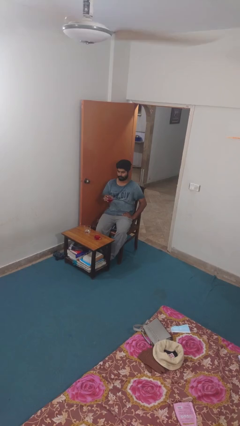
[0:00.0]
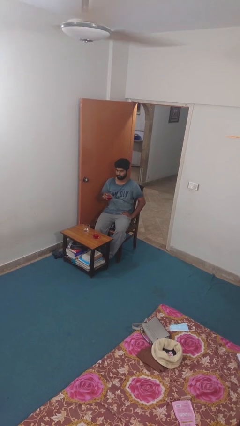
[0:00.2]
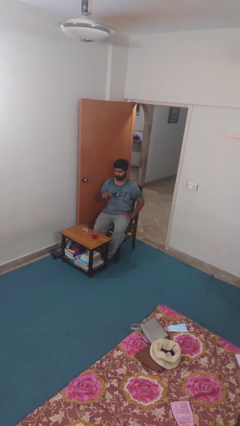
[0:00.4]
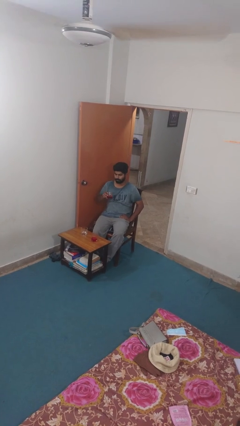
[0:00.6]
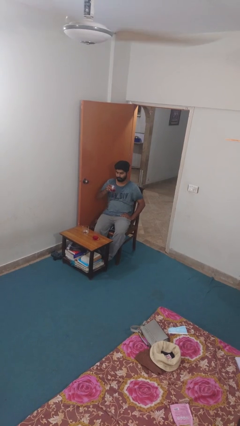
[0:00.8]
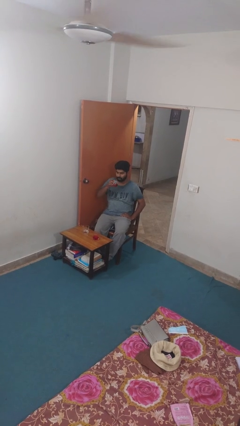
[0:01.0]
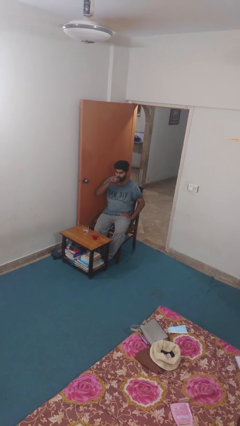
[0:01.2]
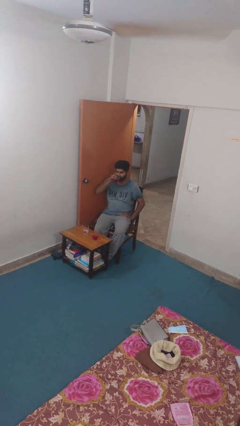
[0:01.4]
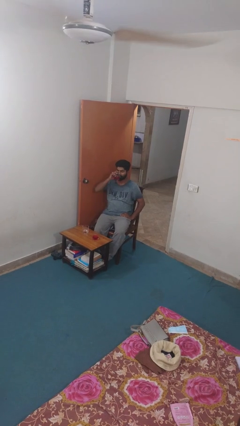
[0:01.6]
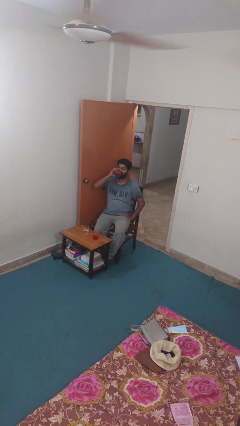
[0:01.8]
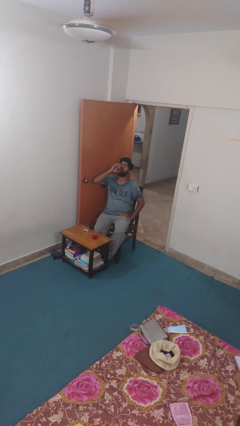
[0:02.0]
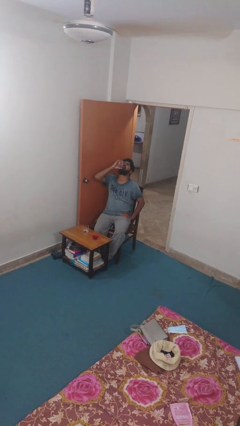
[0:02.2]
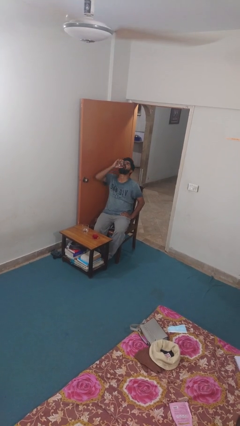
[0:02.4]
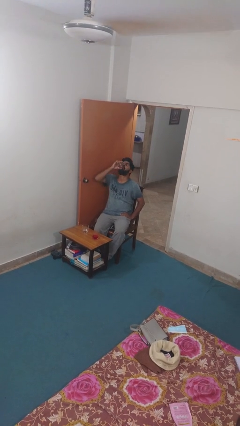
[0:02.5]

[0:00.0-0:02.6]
person drinks from shotglass

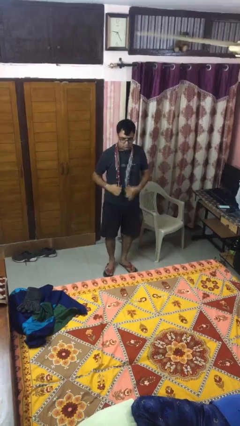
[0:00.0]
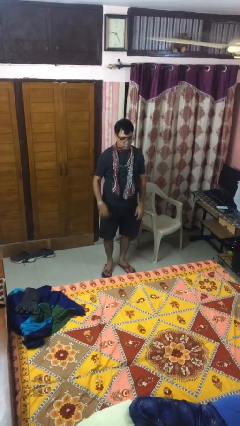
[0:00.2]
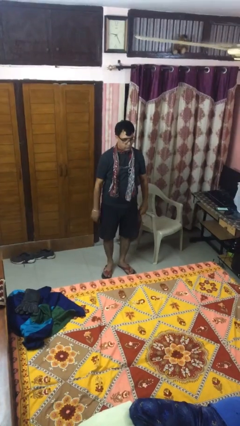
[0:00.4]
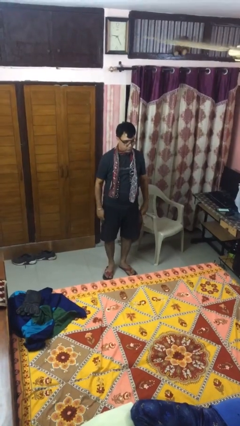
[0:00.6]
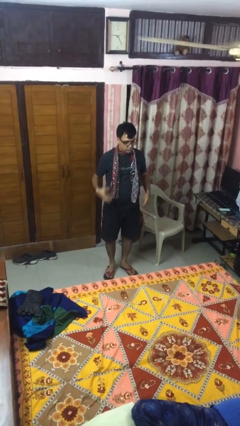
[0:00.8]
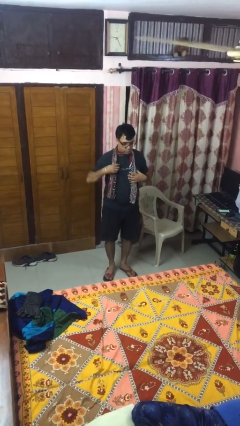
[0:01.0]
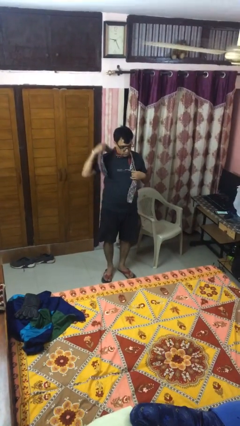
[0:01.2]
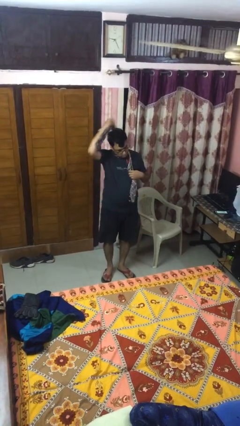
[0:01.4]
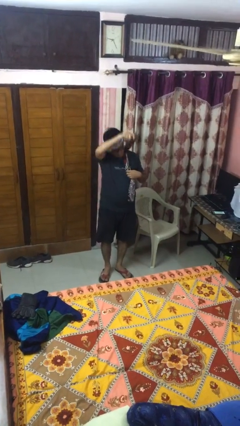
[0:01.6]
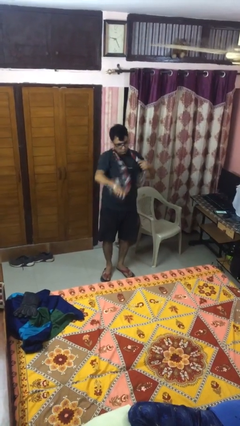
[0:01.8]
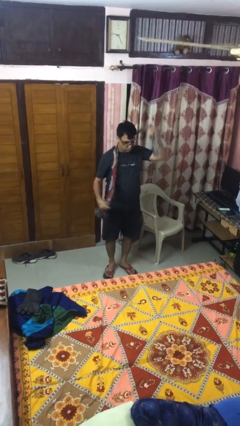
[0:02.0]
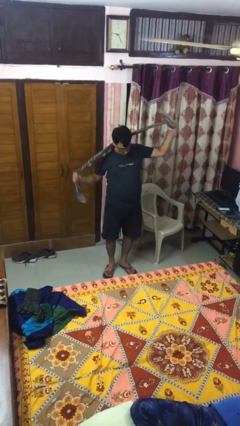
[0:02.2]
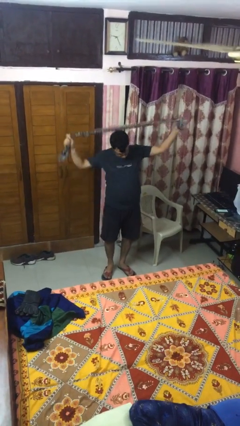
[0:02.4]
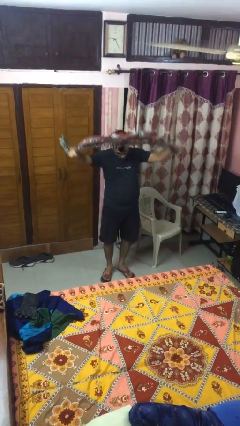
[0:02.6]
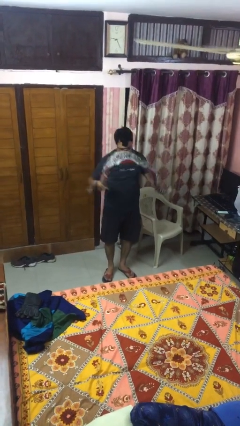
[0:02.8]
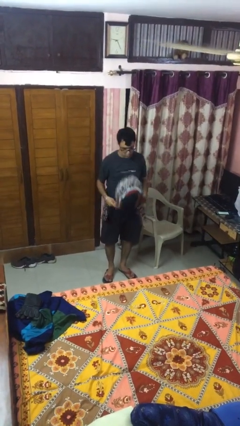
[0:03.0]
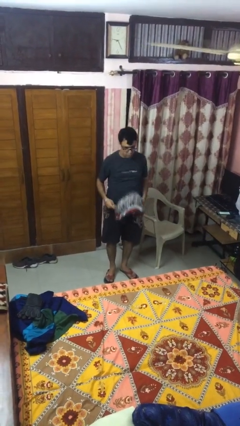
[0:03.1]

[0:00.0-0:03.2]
person takes off scarf

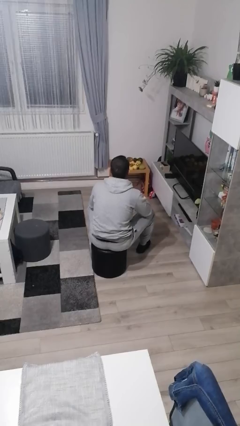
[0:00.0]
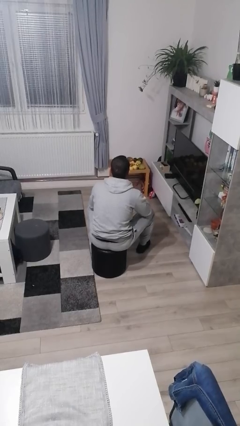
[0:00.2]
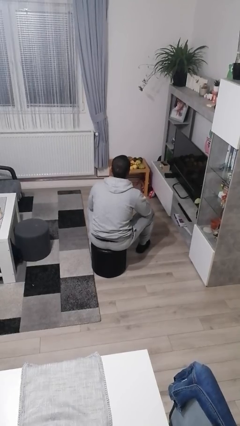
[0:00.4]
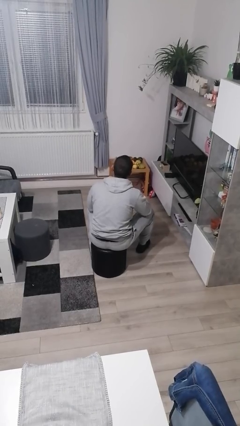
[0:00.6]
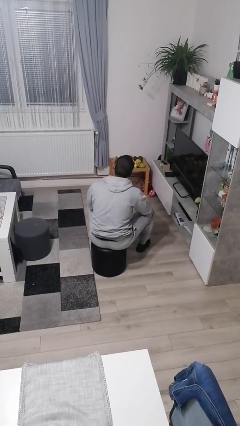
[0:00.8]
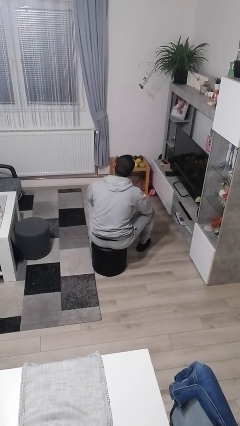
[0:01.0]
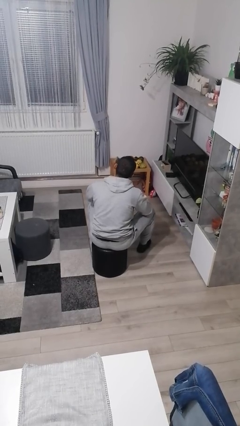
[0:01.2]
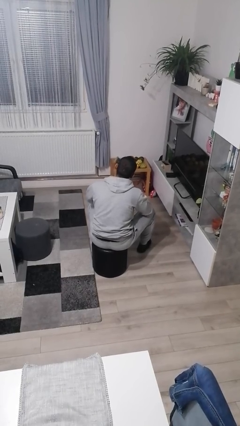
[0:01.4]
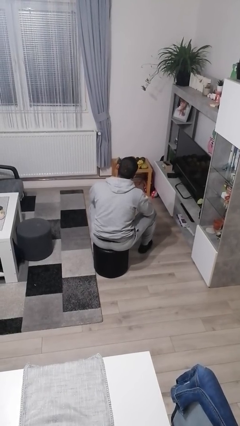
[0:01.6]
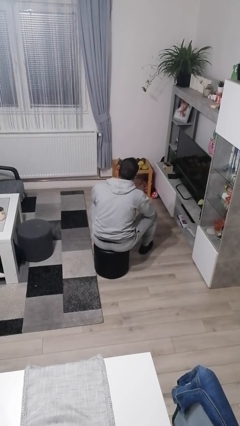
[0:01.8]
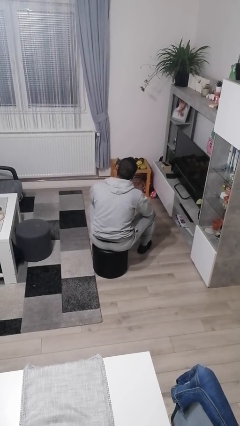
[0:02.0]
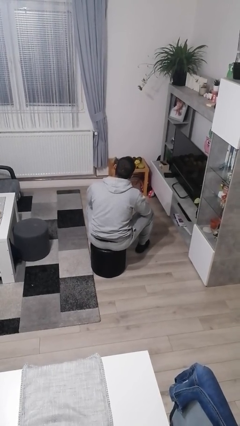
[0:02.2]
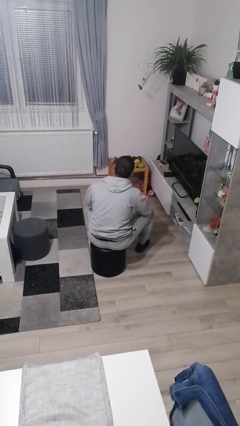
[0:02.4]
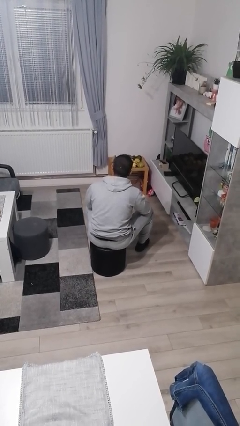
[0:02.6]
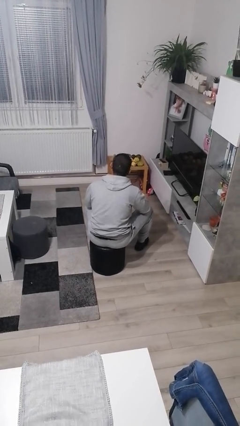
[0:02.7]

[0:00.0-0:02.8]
person strokes chin

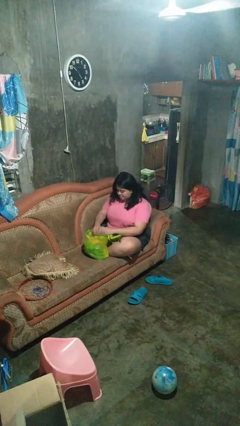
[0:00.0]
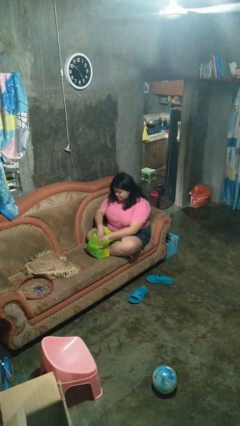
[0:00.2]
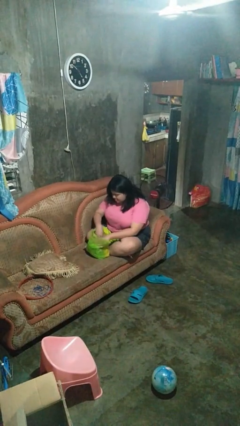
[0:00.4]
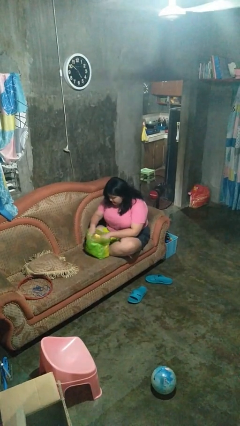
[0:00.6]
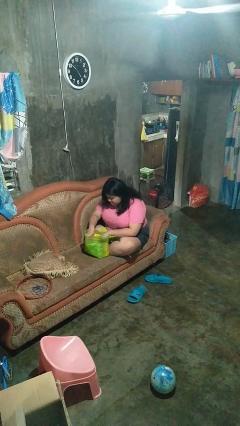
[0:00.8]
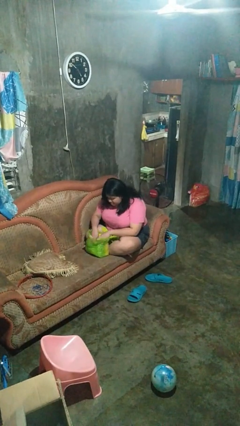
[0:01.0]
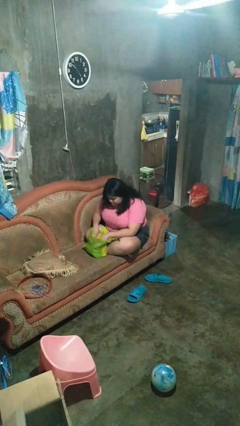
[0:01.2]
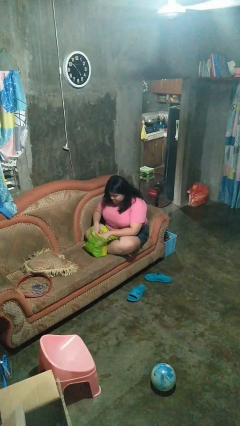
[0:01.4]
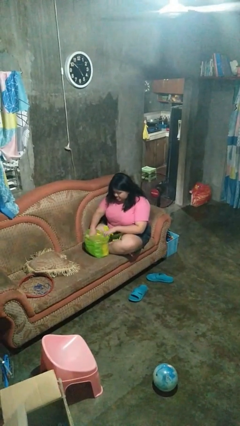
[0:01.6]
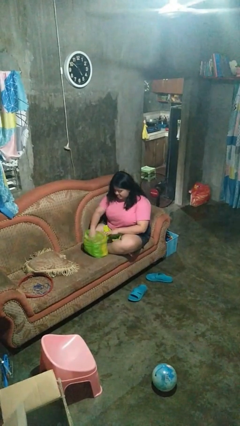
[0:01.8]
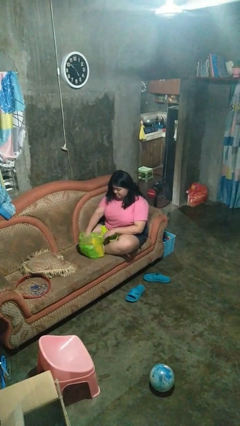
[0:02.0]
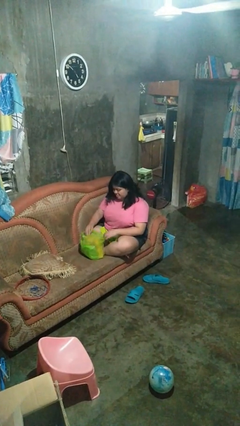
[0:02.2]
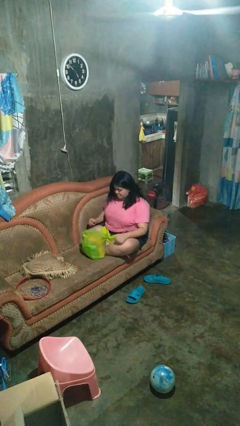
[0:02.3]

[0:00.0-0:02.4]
person searches in bag

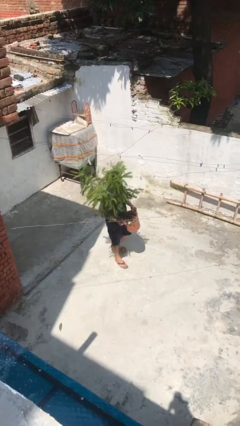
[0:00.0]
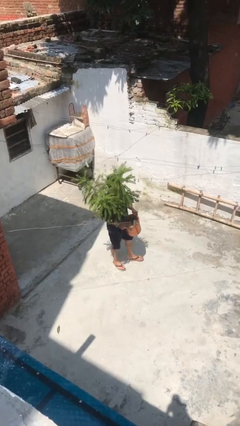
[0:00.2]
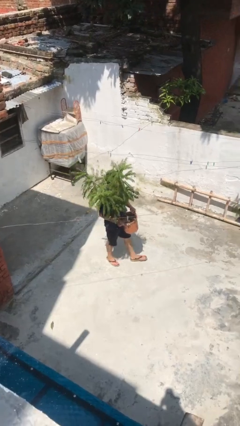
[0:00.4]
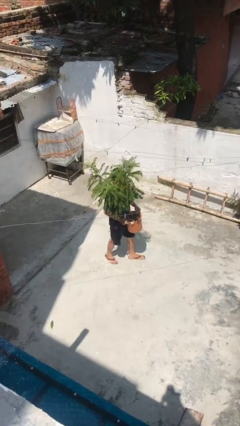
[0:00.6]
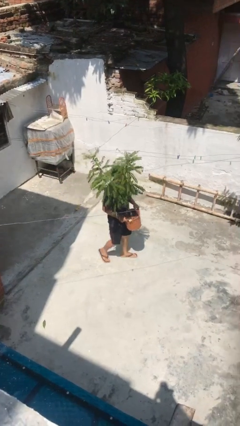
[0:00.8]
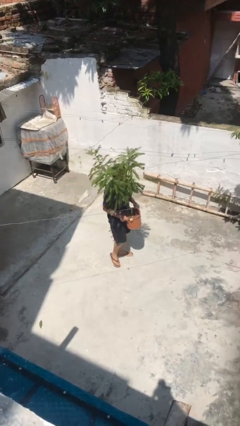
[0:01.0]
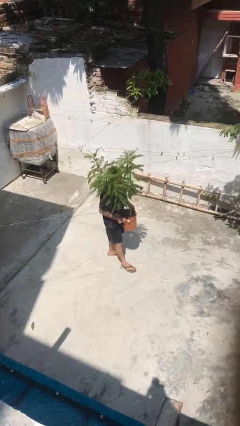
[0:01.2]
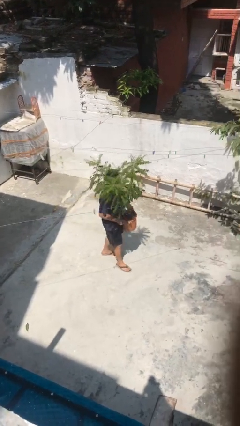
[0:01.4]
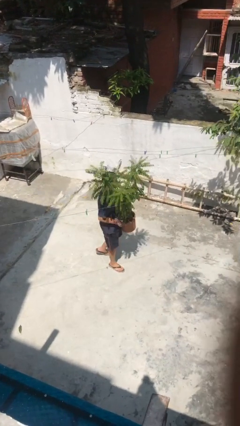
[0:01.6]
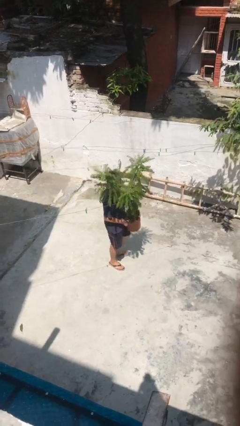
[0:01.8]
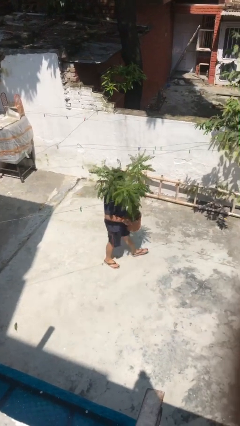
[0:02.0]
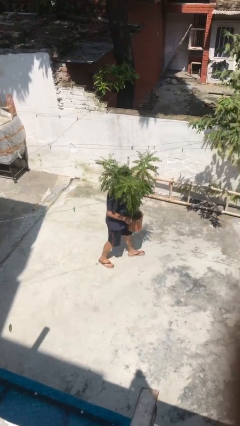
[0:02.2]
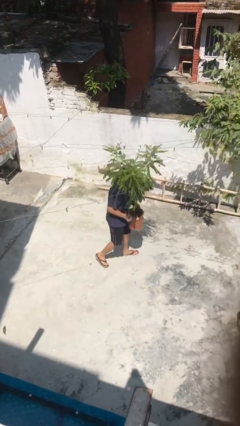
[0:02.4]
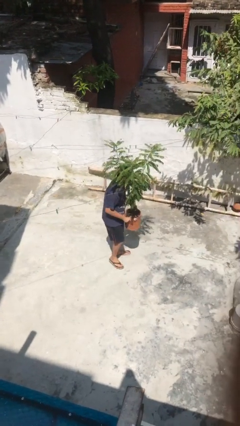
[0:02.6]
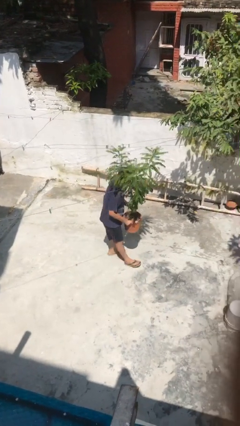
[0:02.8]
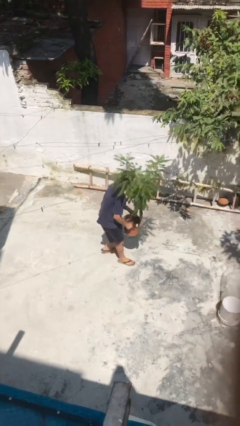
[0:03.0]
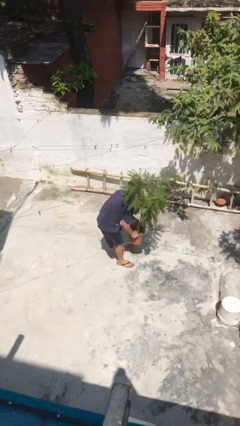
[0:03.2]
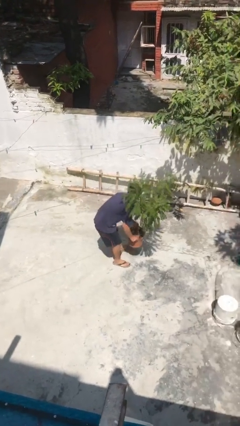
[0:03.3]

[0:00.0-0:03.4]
person carries heavy object

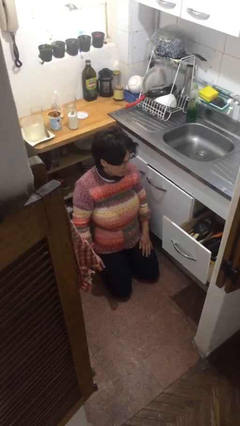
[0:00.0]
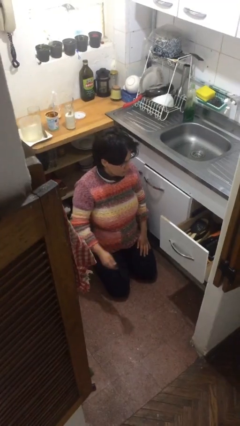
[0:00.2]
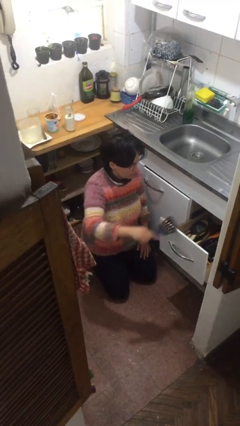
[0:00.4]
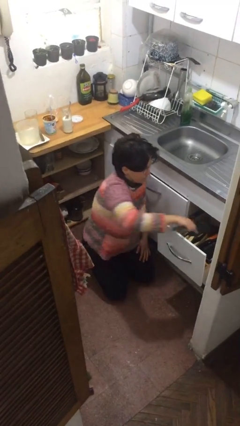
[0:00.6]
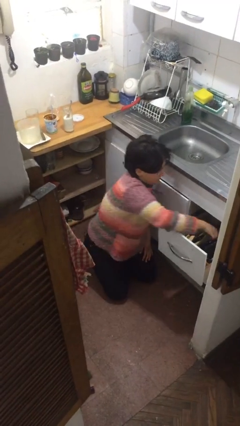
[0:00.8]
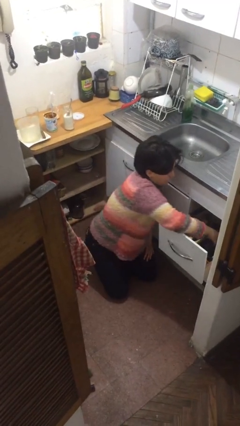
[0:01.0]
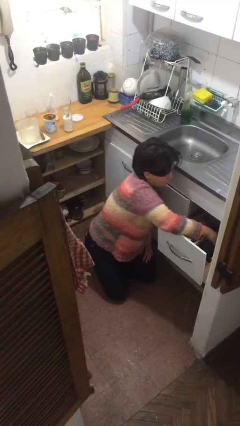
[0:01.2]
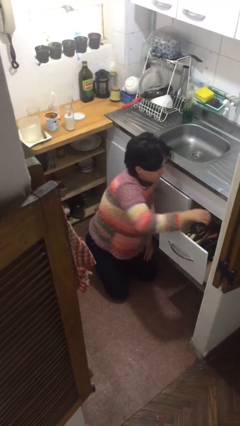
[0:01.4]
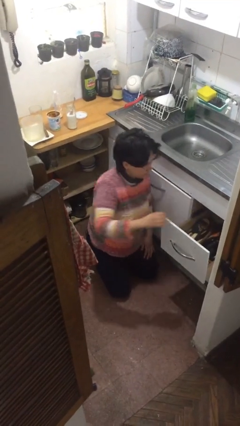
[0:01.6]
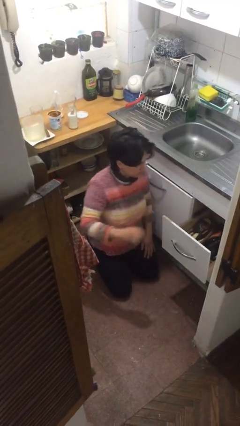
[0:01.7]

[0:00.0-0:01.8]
person puts object into kitchen drawer

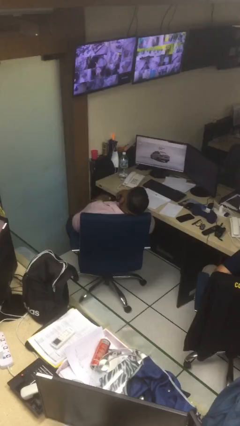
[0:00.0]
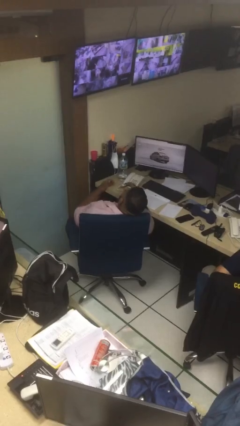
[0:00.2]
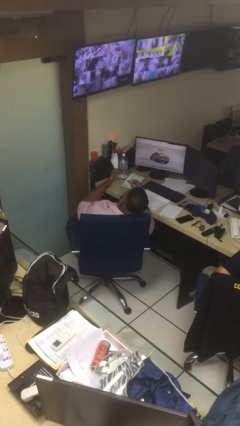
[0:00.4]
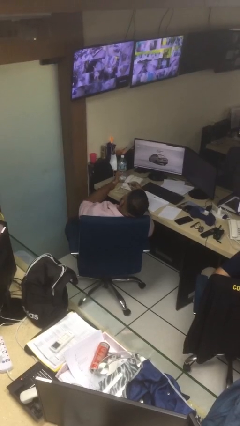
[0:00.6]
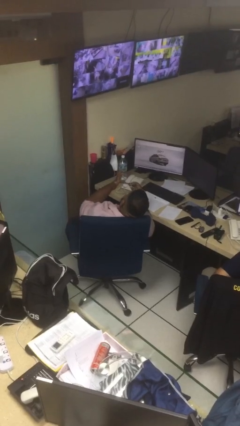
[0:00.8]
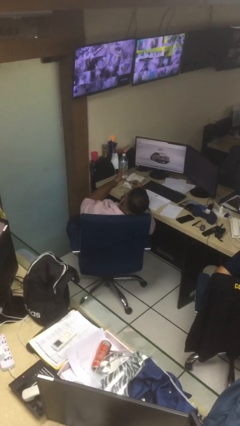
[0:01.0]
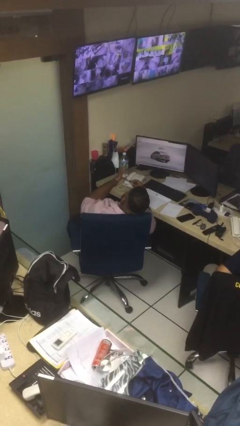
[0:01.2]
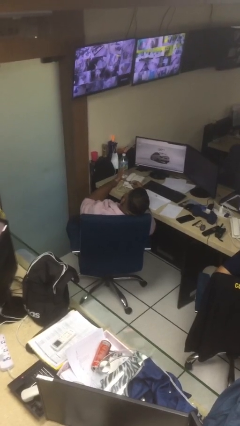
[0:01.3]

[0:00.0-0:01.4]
person clips fingernails
